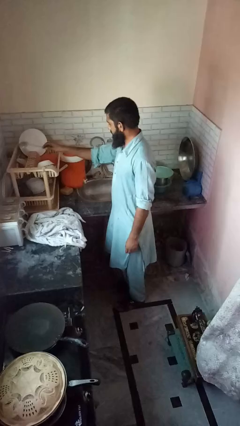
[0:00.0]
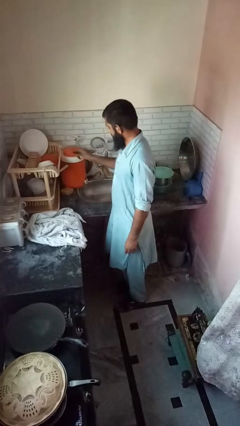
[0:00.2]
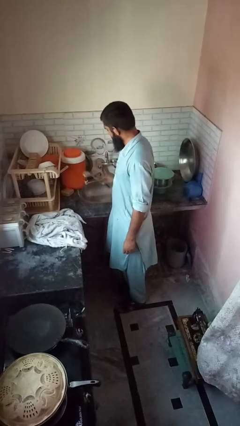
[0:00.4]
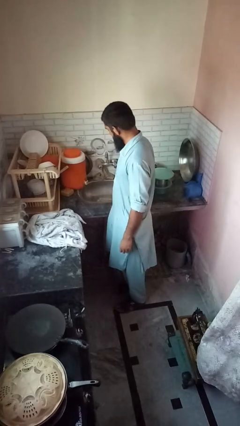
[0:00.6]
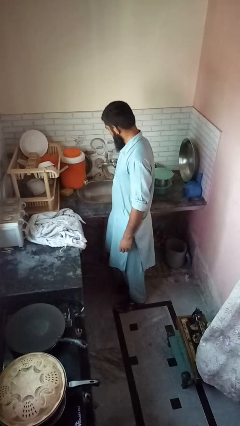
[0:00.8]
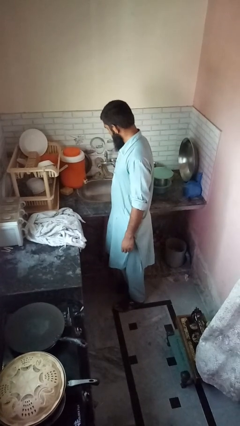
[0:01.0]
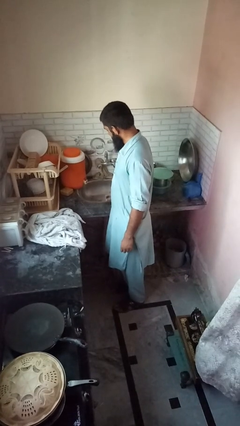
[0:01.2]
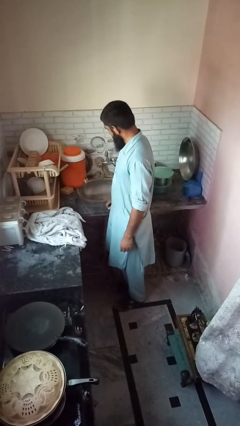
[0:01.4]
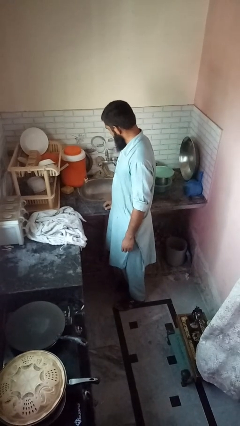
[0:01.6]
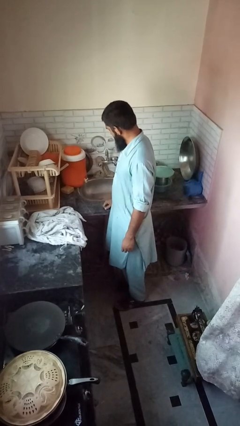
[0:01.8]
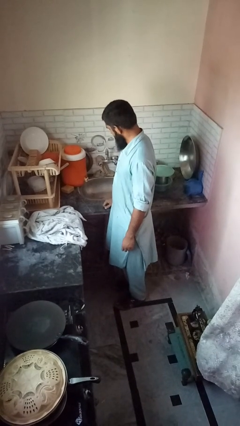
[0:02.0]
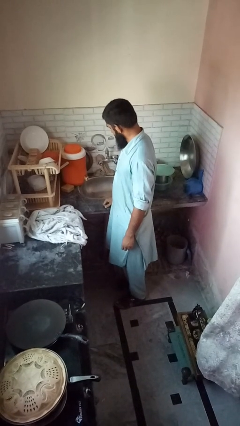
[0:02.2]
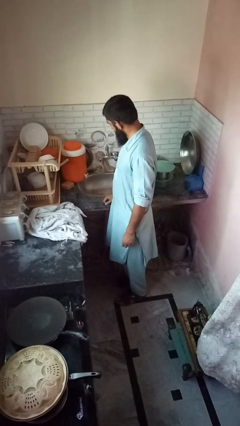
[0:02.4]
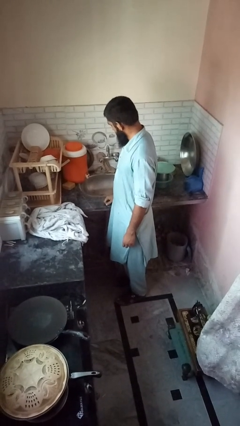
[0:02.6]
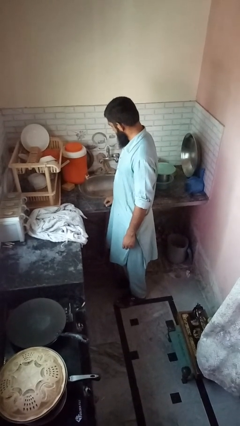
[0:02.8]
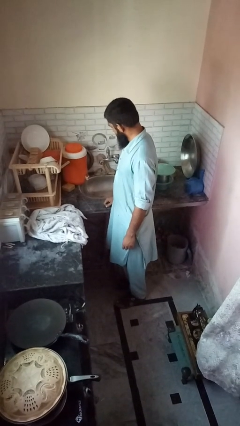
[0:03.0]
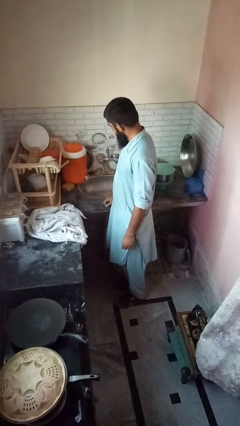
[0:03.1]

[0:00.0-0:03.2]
person loads dishwasher

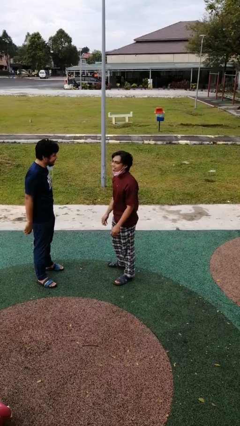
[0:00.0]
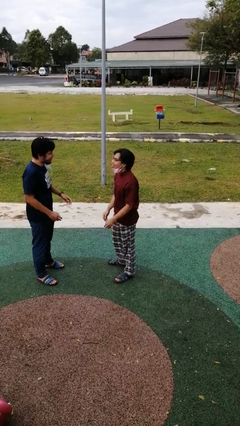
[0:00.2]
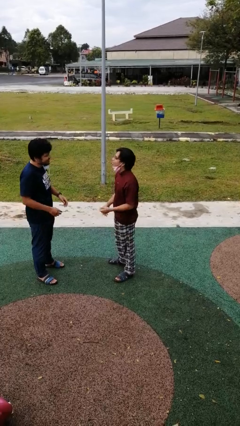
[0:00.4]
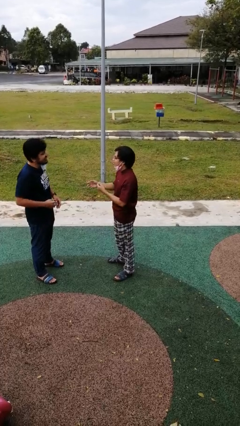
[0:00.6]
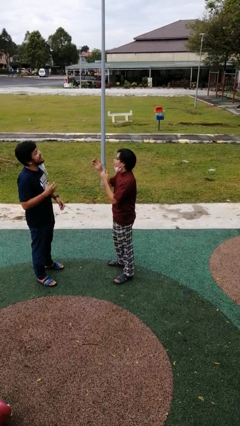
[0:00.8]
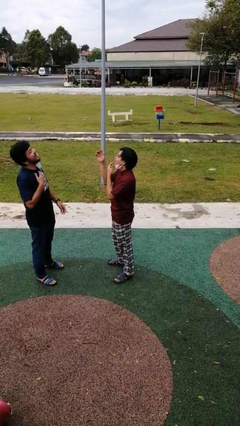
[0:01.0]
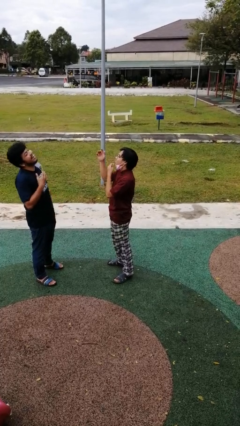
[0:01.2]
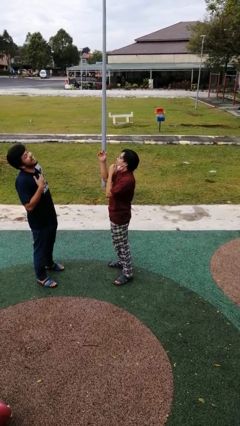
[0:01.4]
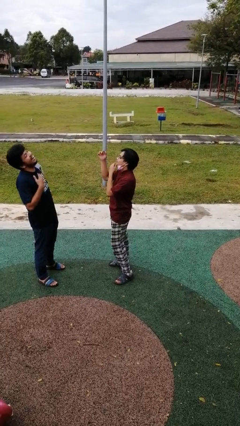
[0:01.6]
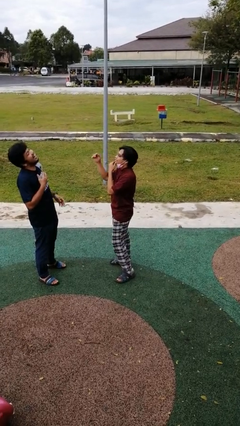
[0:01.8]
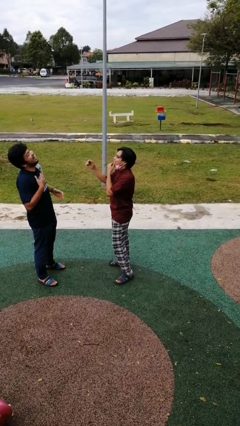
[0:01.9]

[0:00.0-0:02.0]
person laughs with person

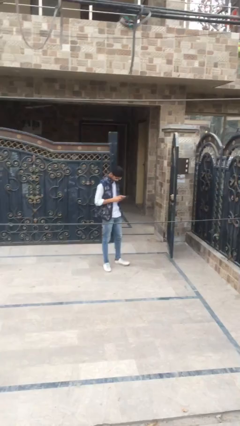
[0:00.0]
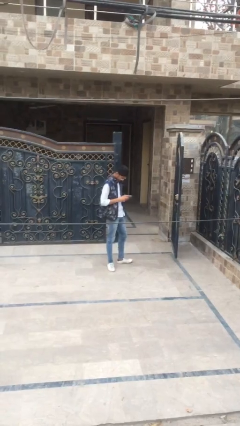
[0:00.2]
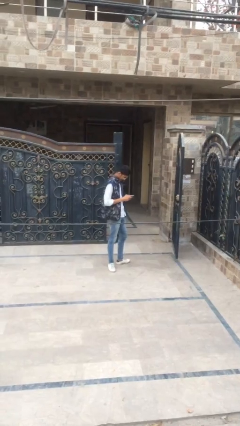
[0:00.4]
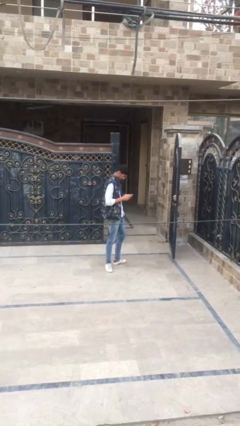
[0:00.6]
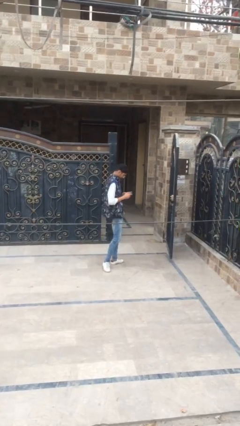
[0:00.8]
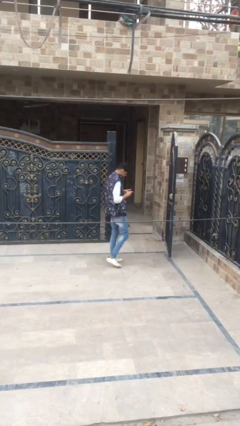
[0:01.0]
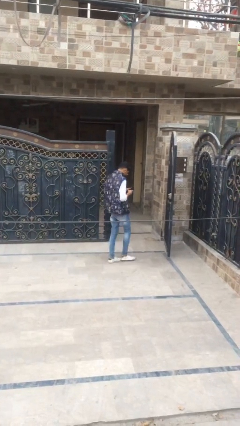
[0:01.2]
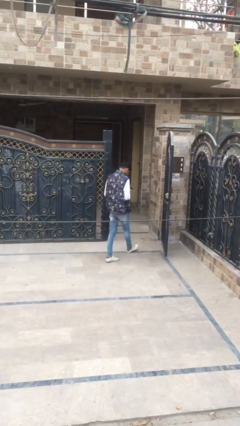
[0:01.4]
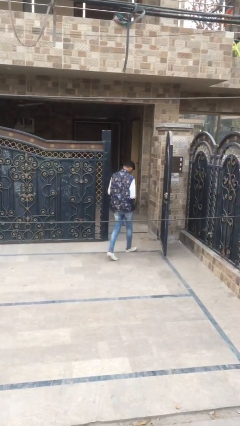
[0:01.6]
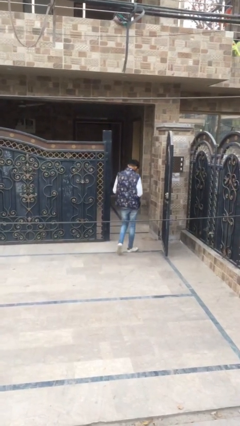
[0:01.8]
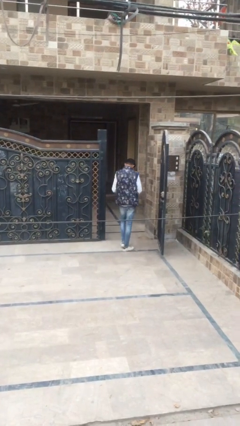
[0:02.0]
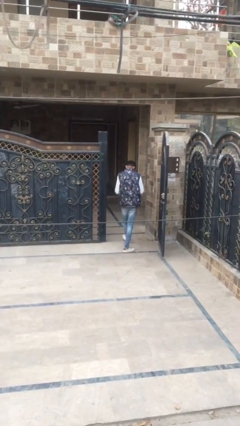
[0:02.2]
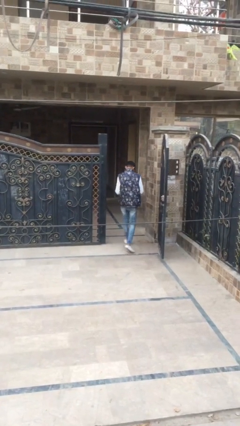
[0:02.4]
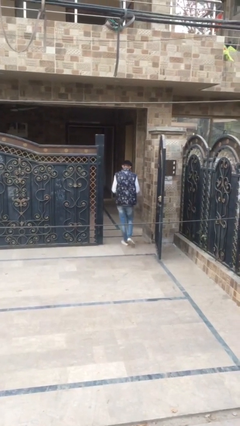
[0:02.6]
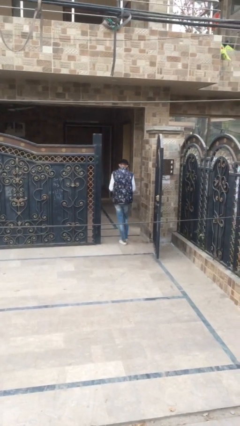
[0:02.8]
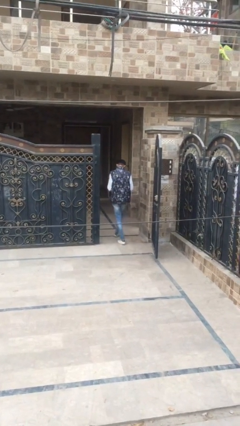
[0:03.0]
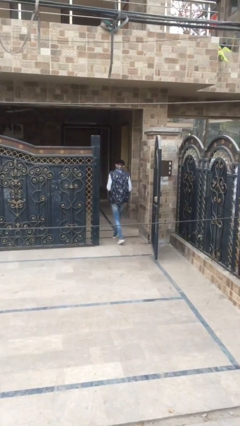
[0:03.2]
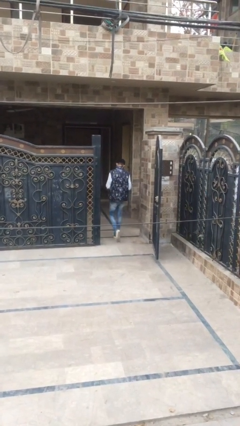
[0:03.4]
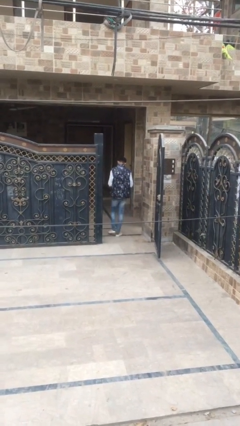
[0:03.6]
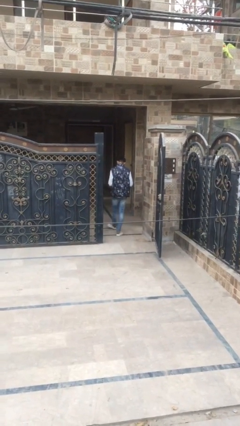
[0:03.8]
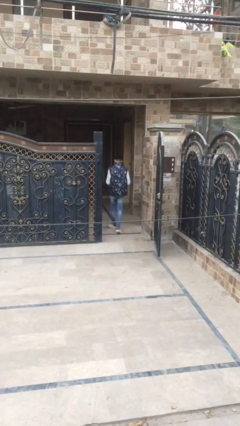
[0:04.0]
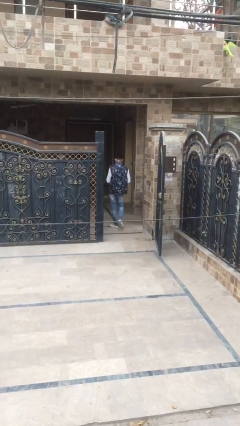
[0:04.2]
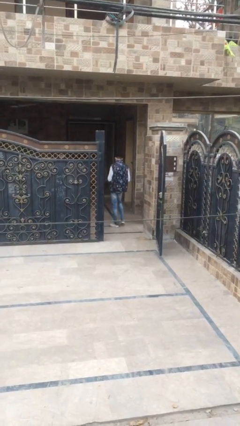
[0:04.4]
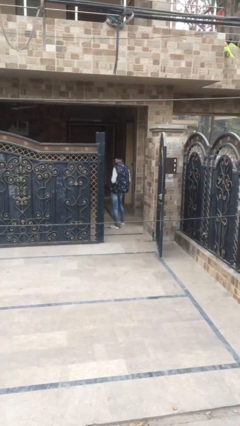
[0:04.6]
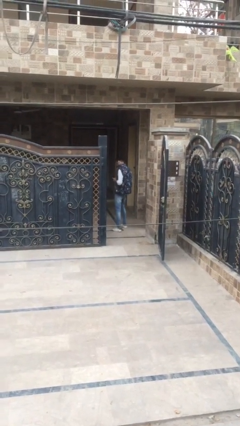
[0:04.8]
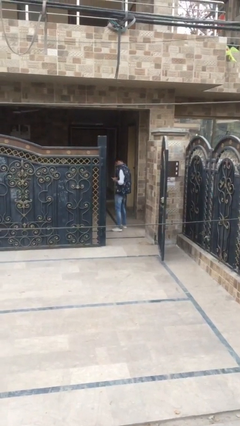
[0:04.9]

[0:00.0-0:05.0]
person enters scene through structure

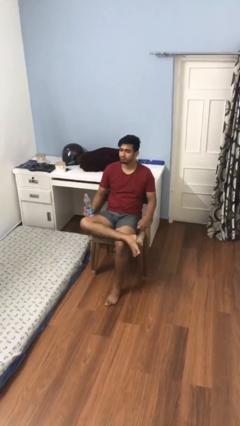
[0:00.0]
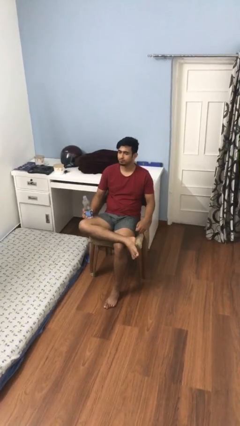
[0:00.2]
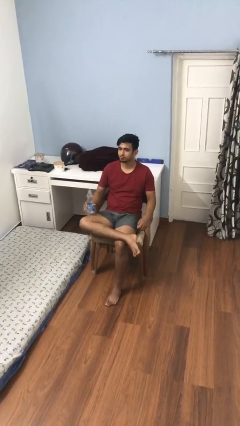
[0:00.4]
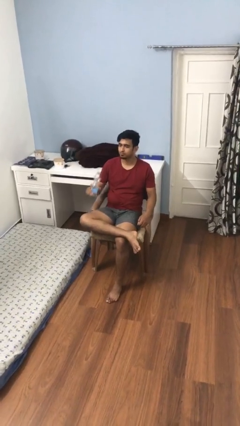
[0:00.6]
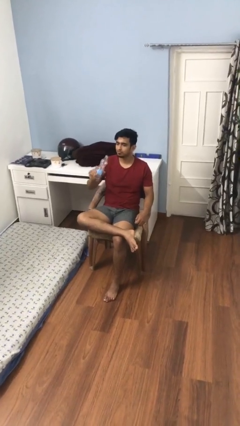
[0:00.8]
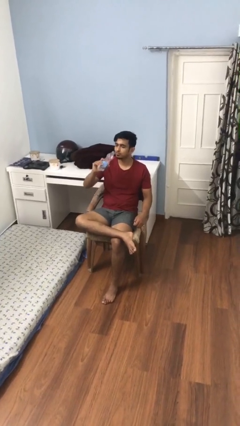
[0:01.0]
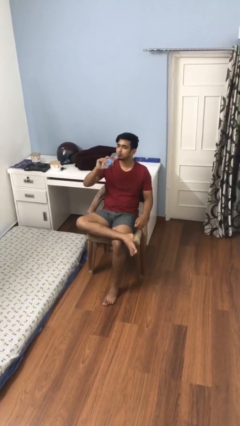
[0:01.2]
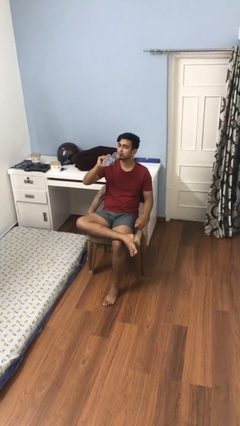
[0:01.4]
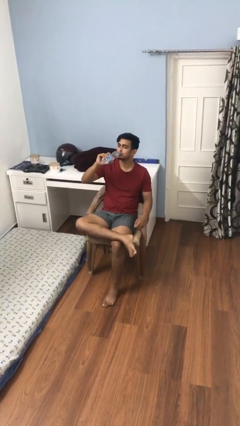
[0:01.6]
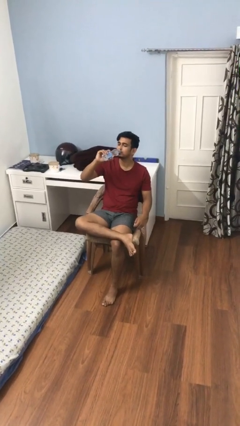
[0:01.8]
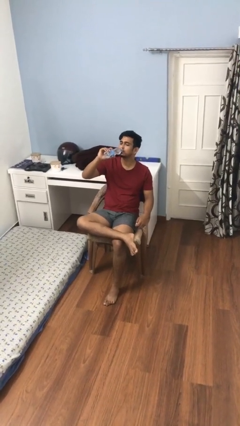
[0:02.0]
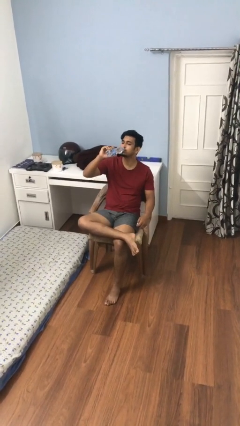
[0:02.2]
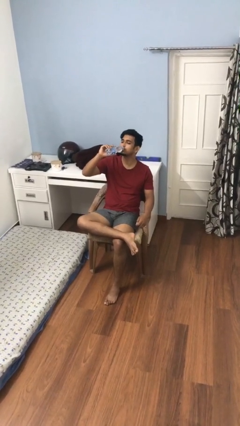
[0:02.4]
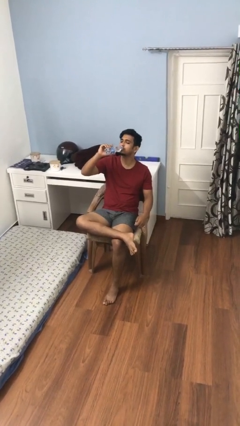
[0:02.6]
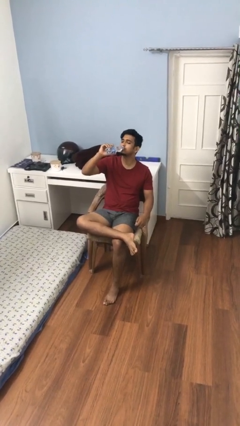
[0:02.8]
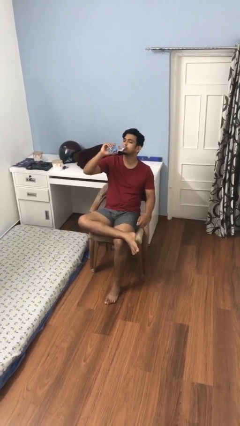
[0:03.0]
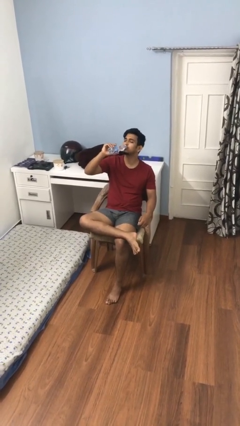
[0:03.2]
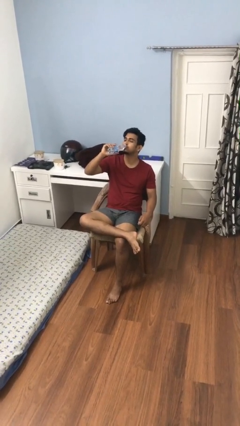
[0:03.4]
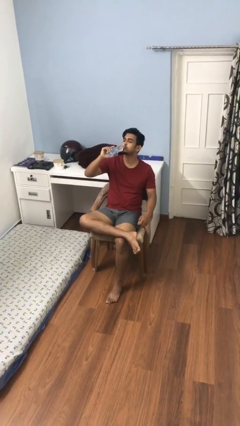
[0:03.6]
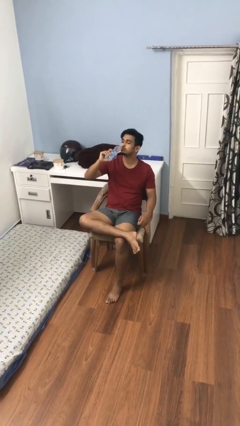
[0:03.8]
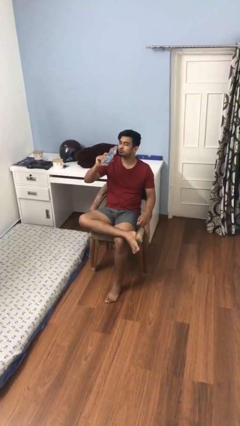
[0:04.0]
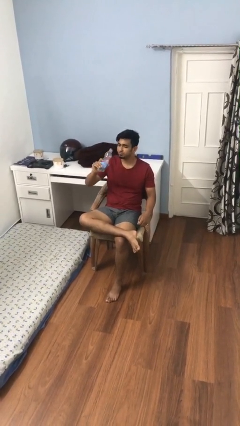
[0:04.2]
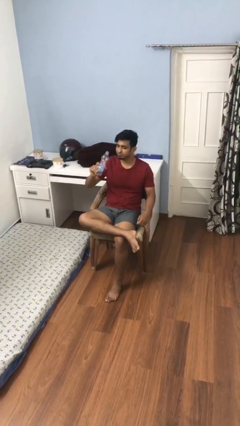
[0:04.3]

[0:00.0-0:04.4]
person drinks from bottle

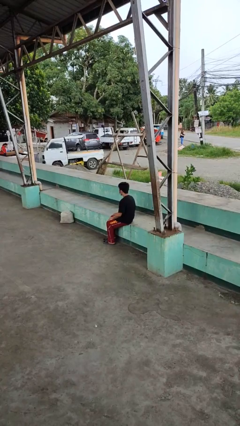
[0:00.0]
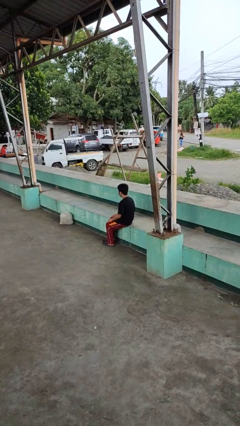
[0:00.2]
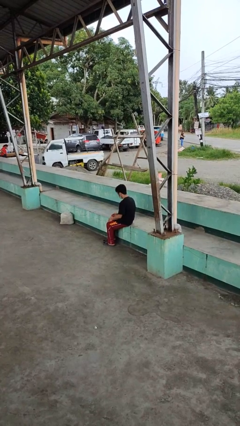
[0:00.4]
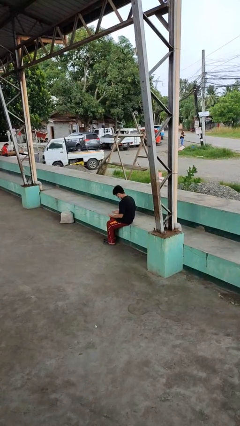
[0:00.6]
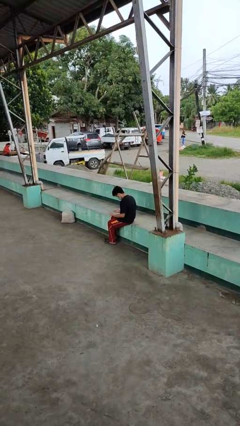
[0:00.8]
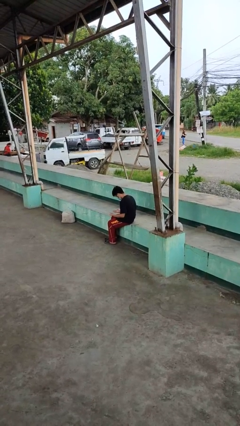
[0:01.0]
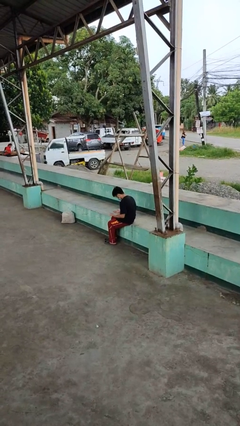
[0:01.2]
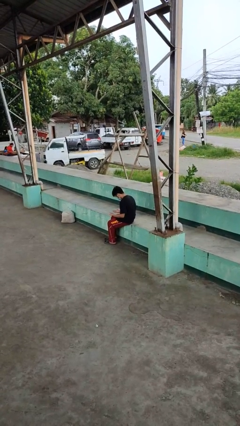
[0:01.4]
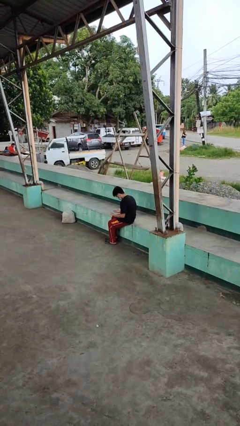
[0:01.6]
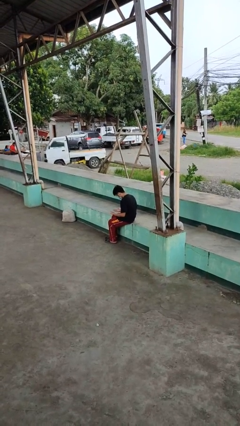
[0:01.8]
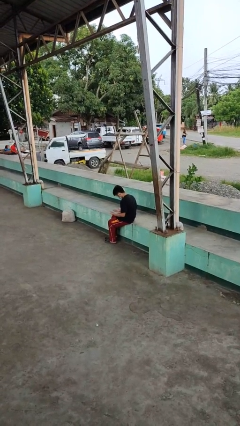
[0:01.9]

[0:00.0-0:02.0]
person looks at hands in lap

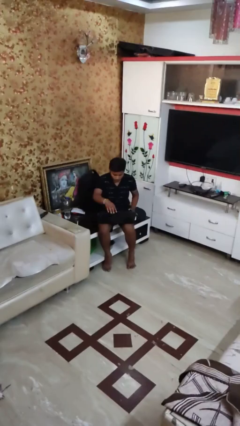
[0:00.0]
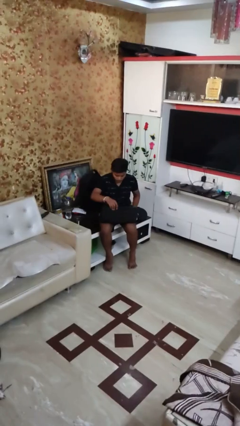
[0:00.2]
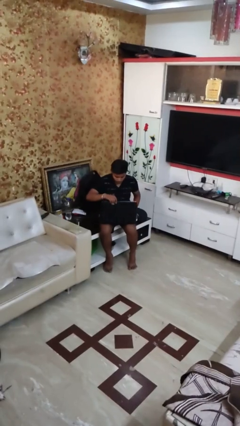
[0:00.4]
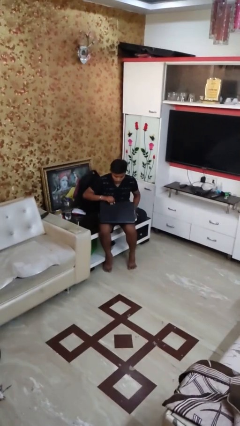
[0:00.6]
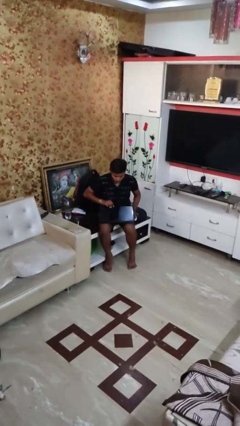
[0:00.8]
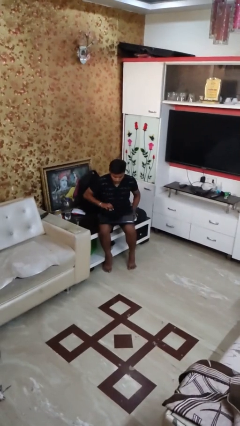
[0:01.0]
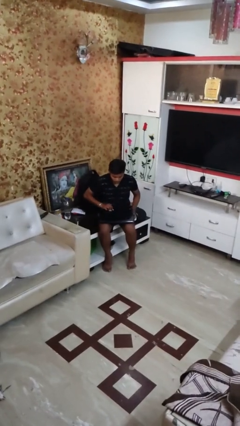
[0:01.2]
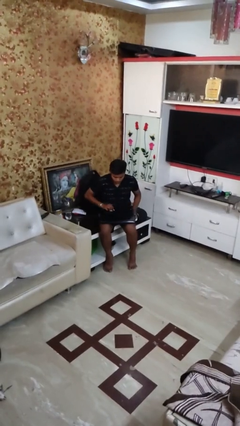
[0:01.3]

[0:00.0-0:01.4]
person closes laptop
